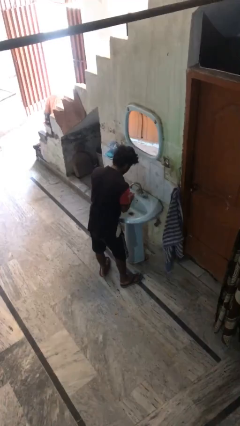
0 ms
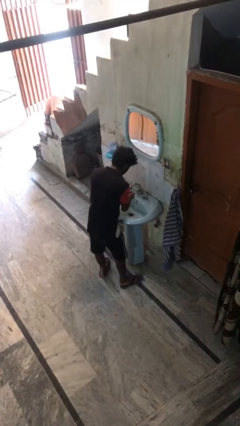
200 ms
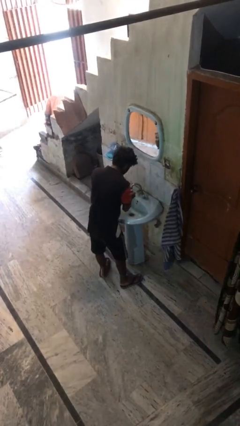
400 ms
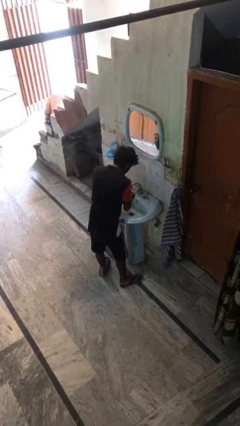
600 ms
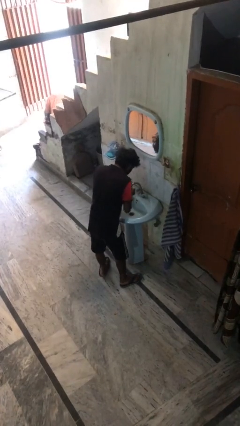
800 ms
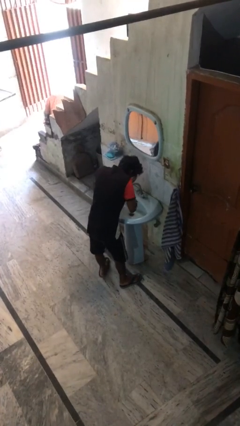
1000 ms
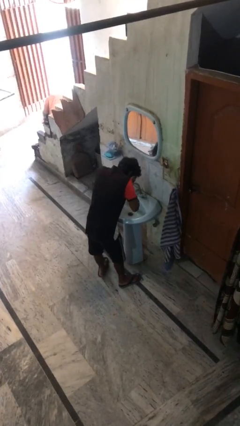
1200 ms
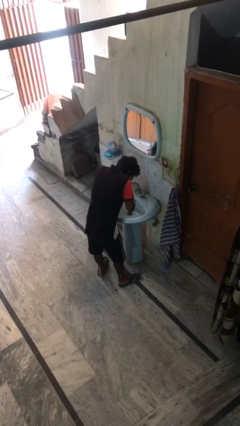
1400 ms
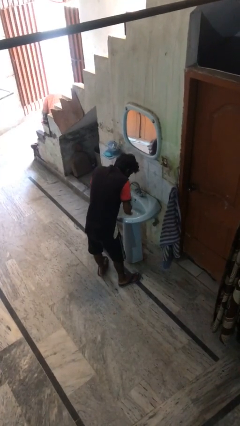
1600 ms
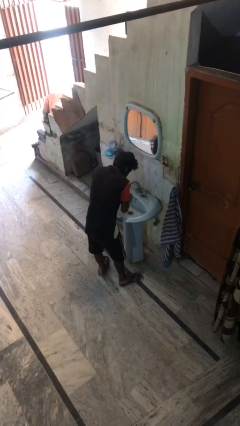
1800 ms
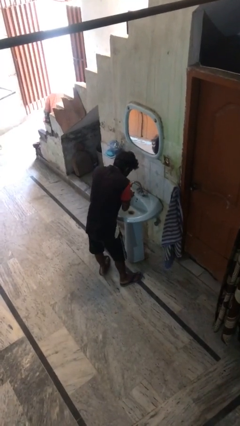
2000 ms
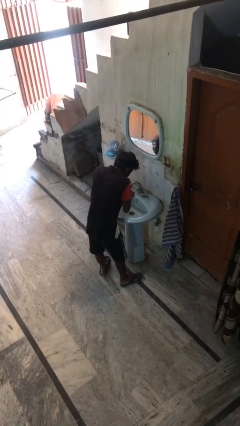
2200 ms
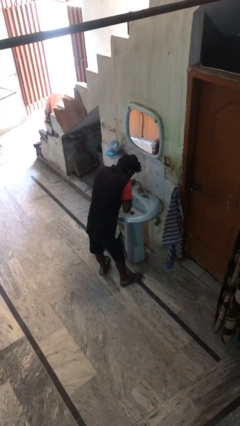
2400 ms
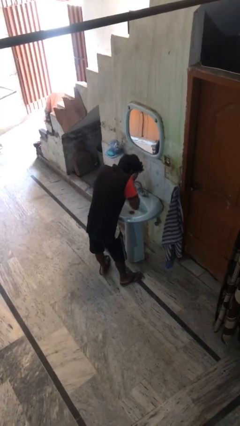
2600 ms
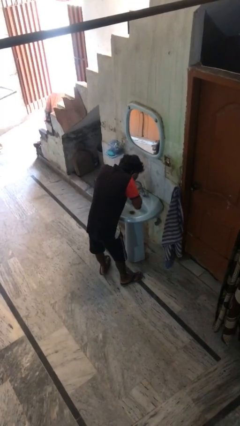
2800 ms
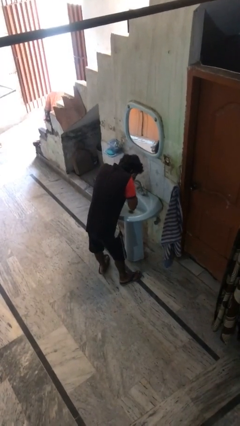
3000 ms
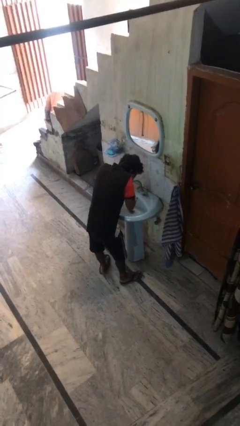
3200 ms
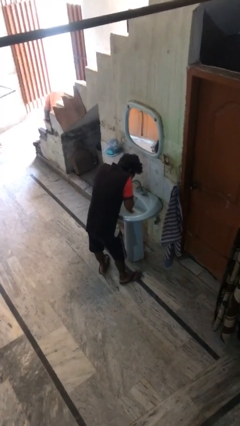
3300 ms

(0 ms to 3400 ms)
person washes face

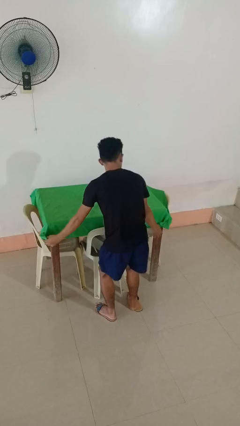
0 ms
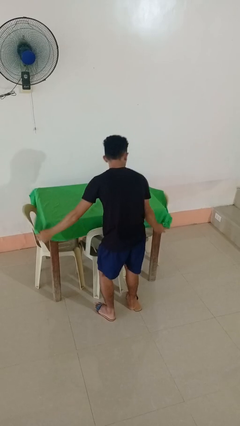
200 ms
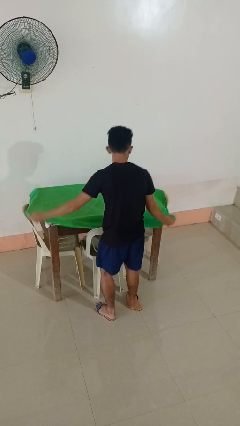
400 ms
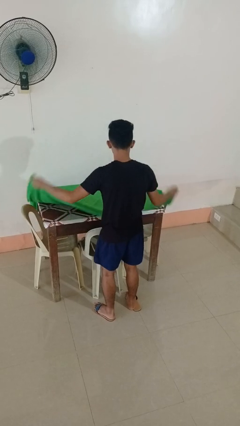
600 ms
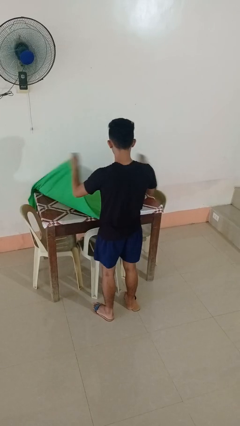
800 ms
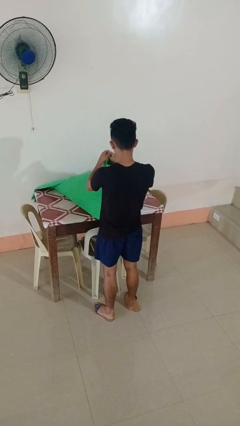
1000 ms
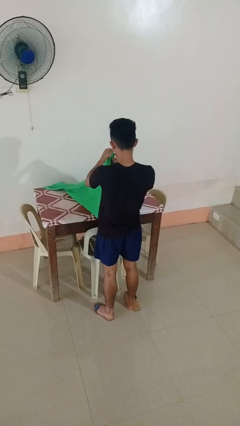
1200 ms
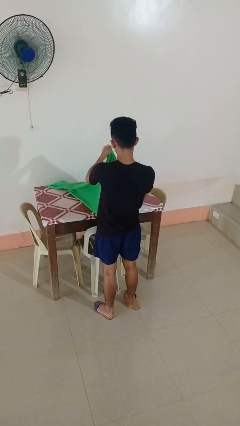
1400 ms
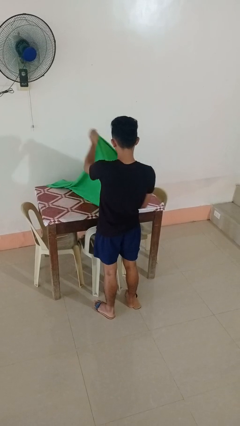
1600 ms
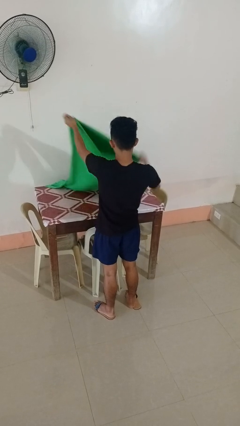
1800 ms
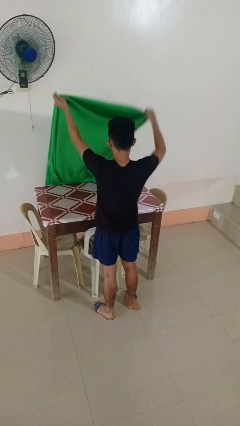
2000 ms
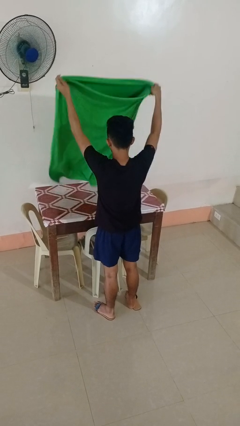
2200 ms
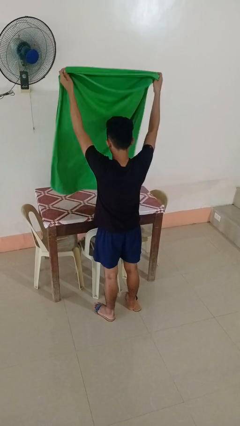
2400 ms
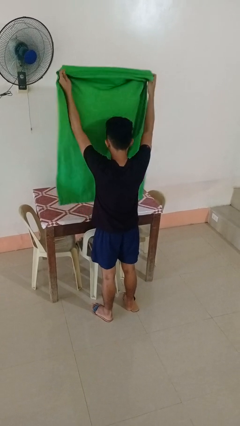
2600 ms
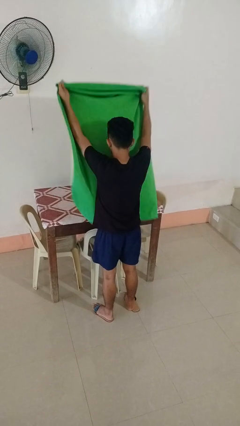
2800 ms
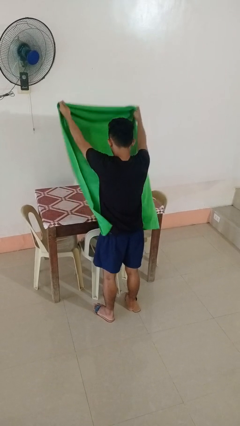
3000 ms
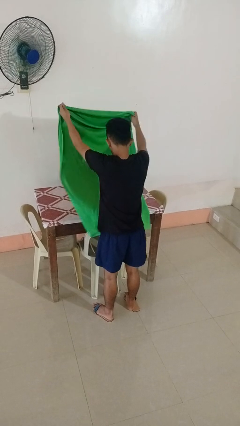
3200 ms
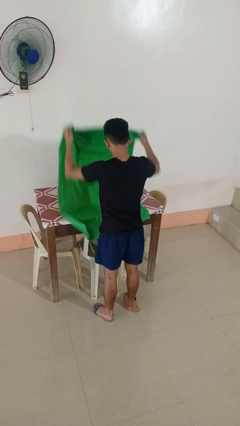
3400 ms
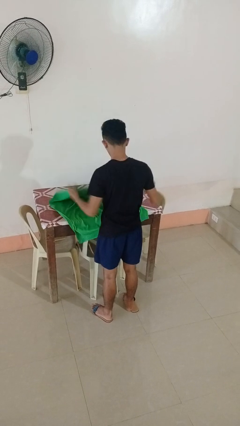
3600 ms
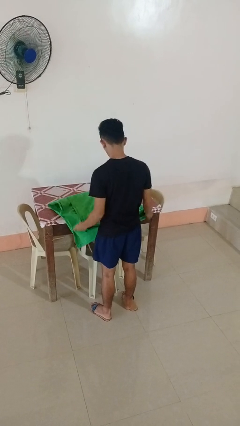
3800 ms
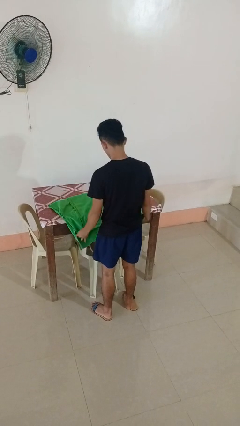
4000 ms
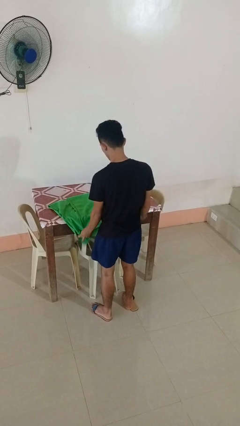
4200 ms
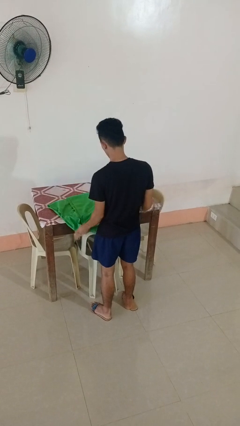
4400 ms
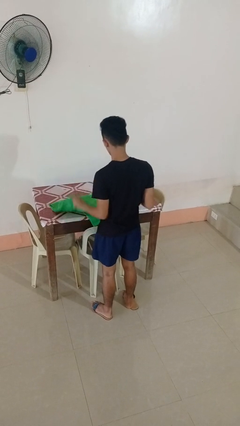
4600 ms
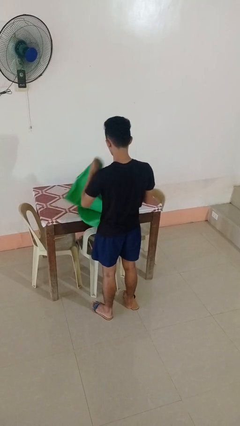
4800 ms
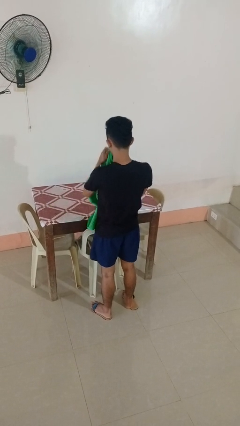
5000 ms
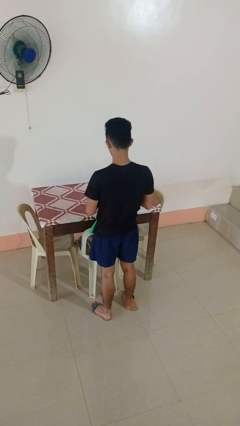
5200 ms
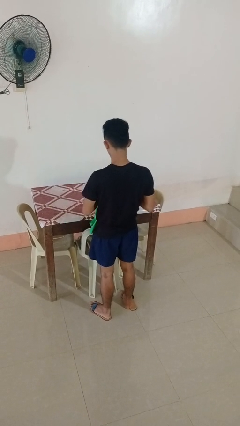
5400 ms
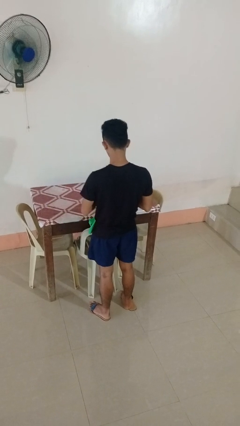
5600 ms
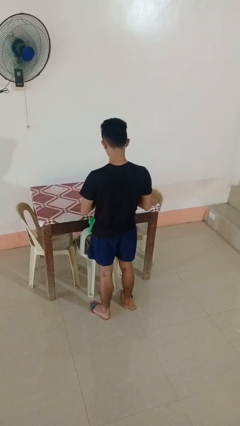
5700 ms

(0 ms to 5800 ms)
person folds tablecloth

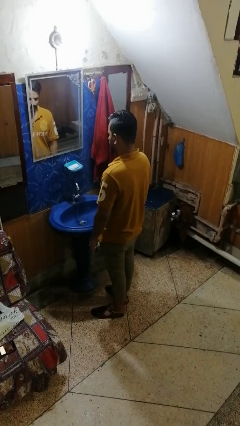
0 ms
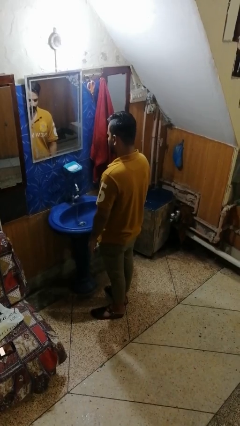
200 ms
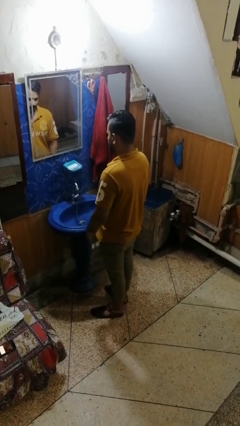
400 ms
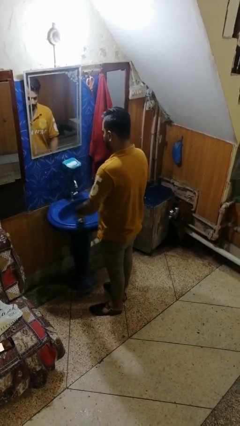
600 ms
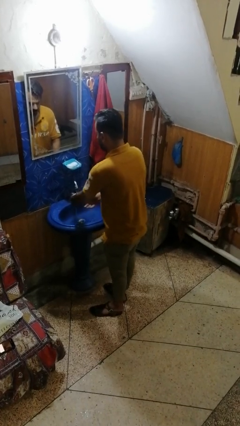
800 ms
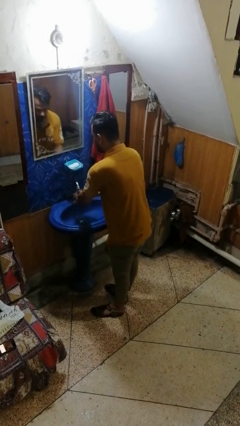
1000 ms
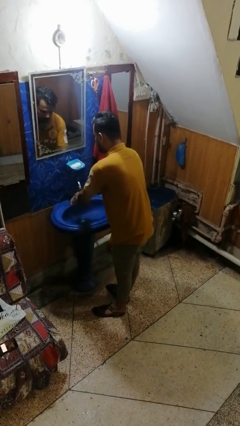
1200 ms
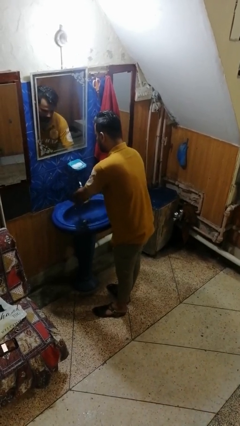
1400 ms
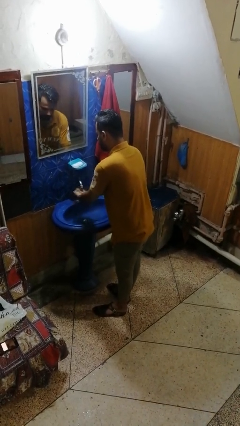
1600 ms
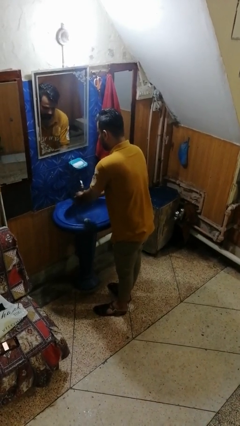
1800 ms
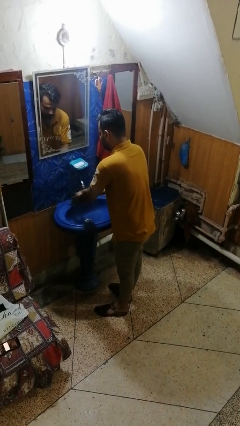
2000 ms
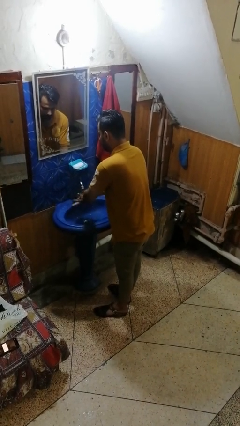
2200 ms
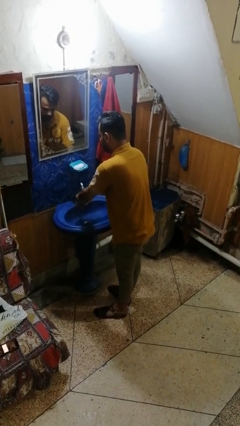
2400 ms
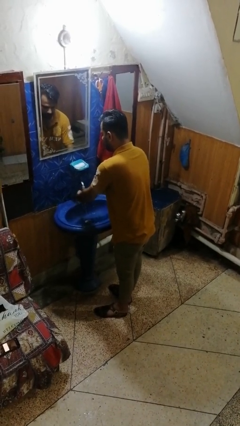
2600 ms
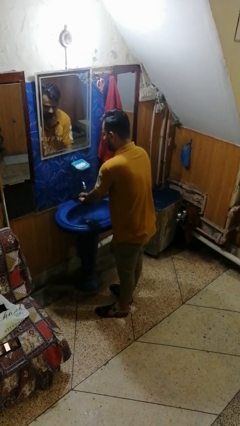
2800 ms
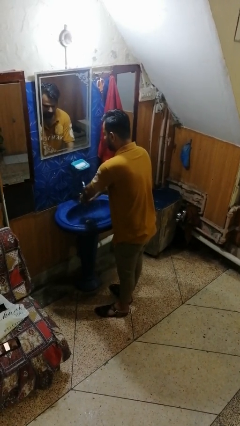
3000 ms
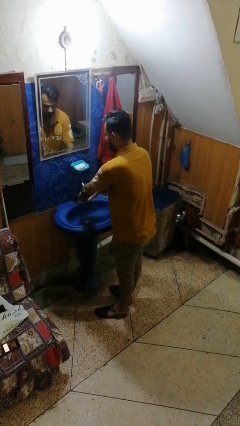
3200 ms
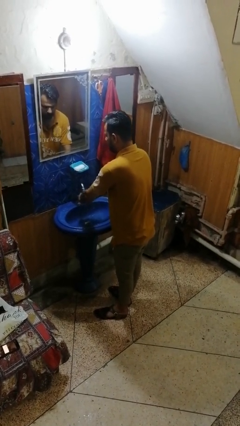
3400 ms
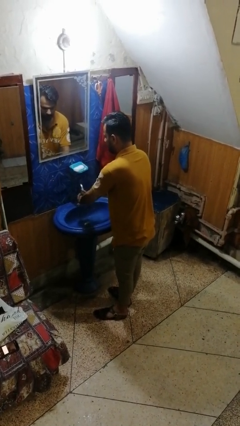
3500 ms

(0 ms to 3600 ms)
person washes hands

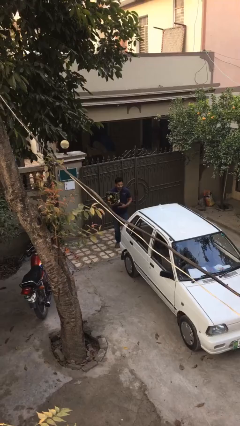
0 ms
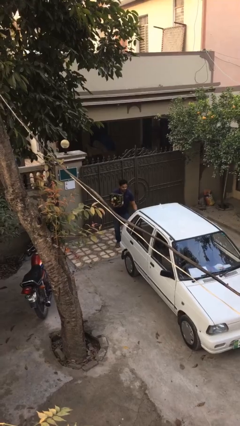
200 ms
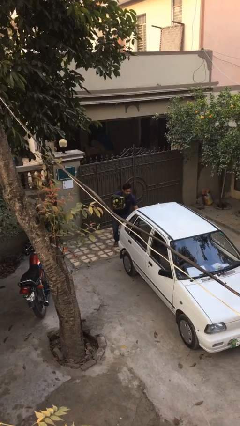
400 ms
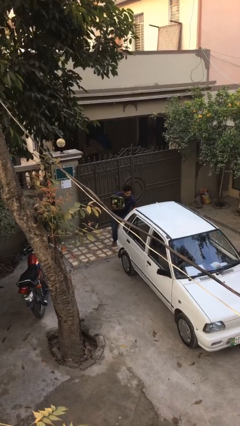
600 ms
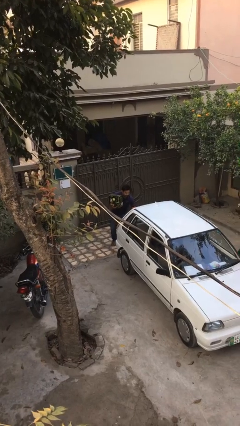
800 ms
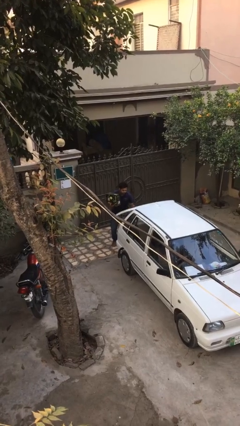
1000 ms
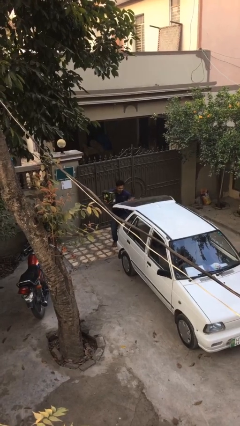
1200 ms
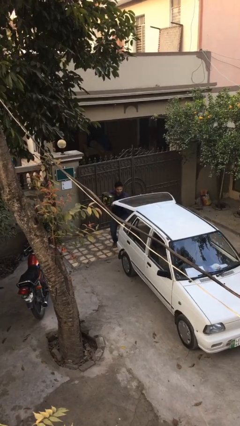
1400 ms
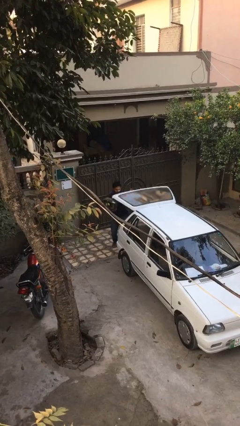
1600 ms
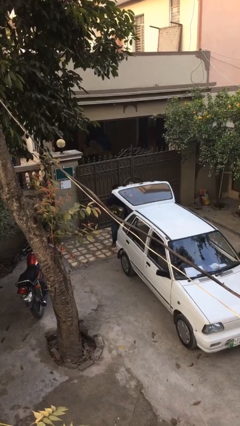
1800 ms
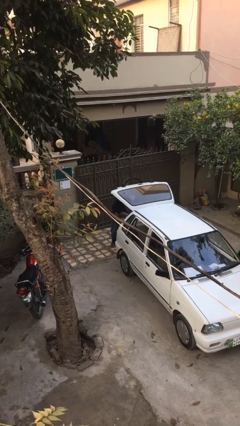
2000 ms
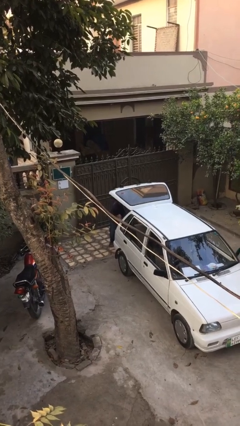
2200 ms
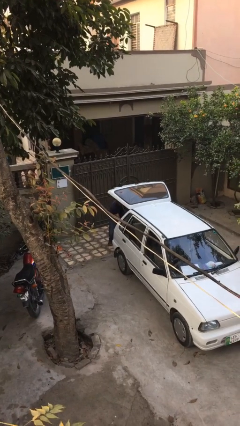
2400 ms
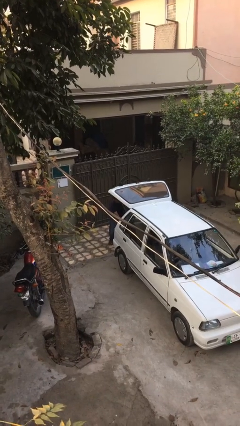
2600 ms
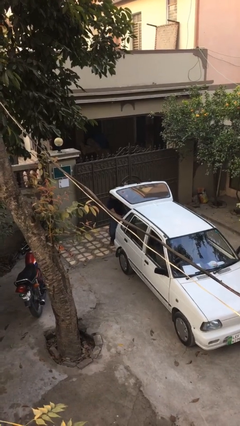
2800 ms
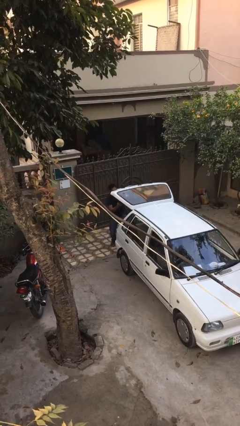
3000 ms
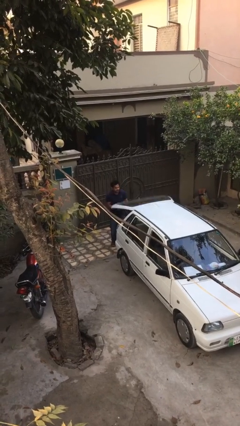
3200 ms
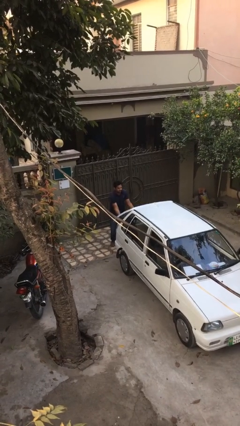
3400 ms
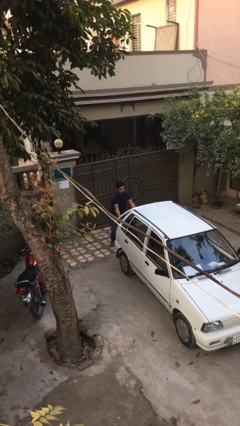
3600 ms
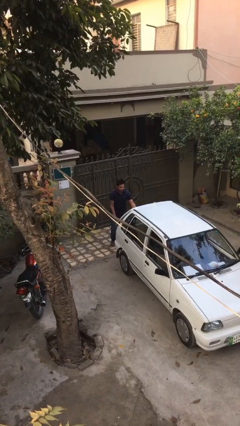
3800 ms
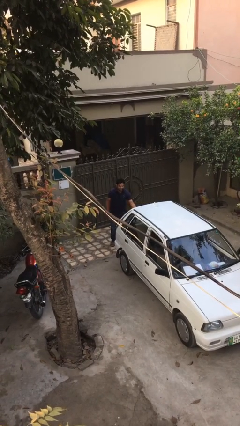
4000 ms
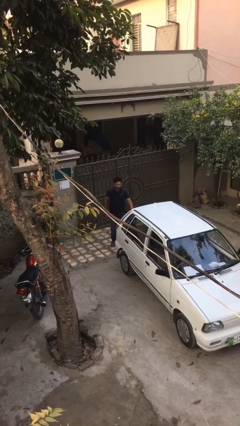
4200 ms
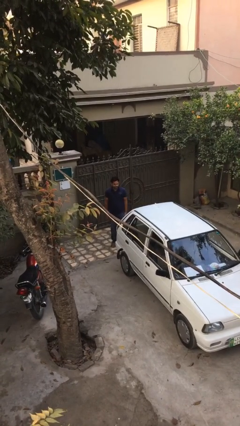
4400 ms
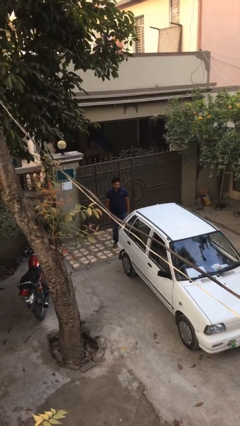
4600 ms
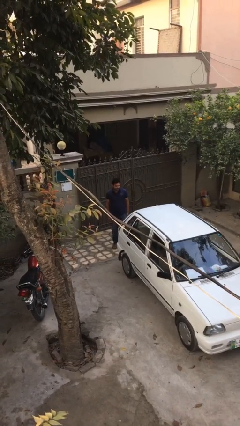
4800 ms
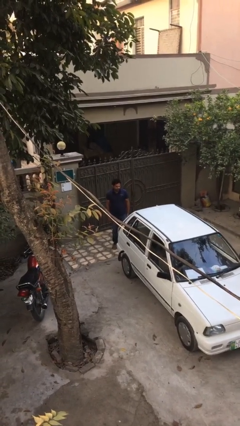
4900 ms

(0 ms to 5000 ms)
person loads car

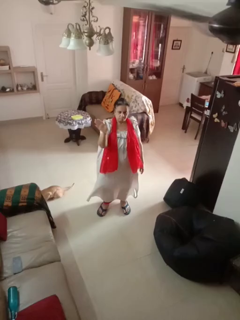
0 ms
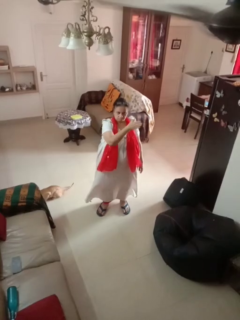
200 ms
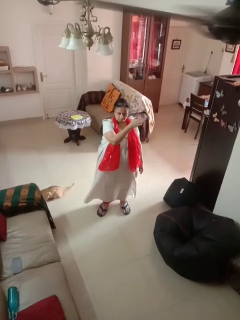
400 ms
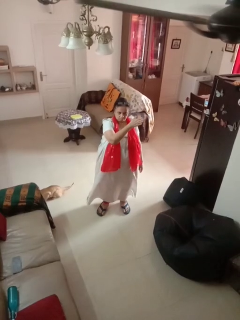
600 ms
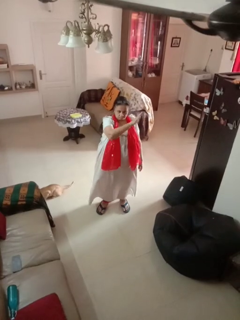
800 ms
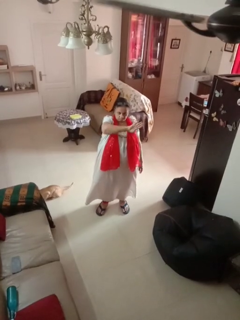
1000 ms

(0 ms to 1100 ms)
person gestures swipe left
